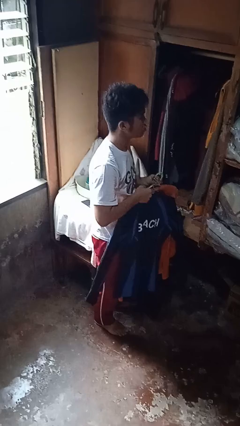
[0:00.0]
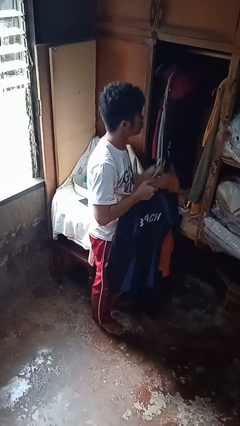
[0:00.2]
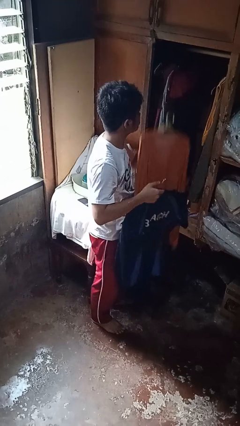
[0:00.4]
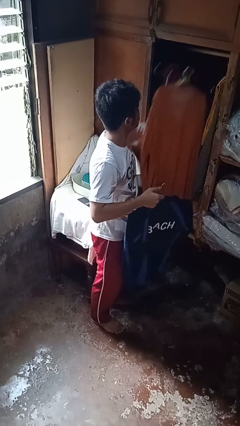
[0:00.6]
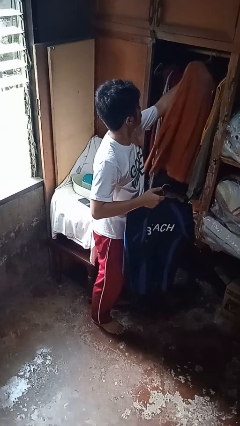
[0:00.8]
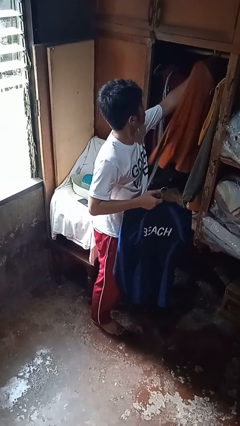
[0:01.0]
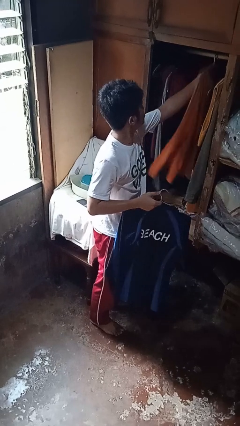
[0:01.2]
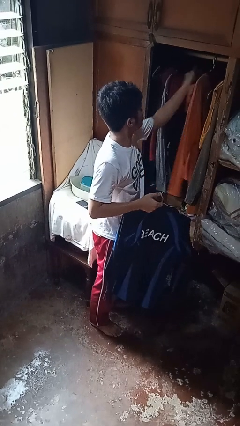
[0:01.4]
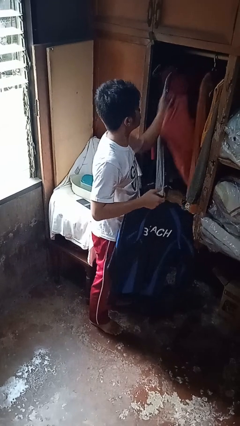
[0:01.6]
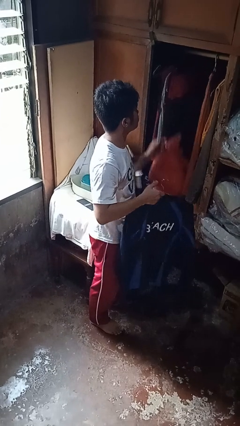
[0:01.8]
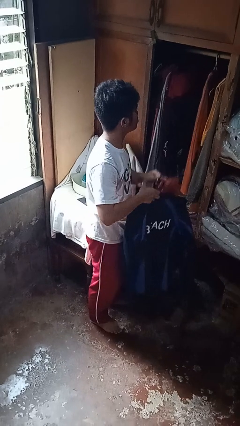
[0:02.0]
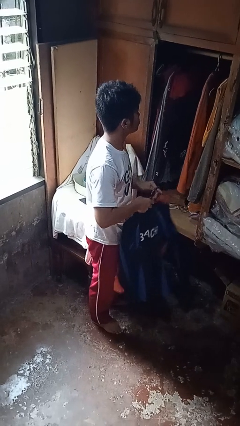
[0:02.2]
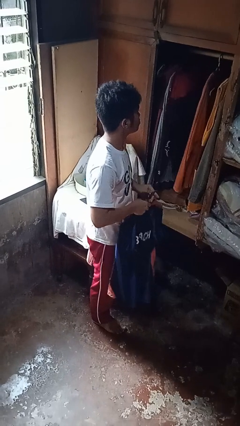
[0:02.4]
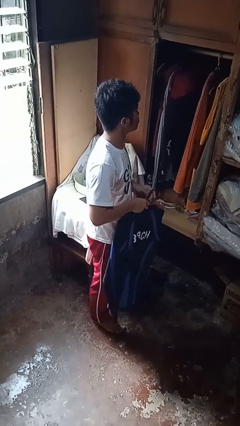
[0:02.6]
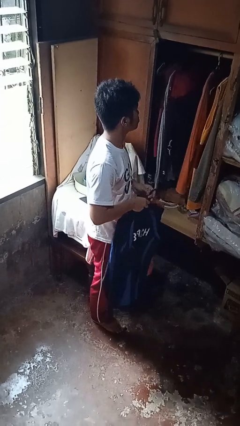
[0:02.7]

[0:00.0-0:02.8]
person puts clothes into closet

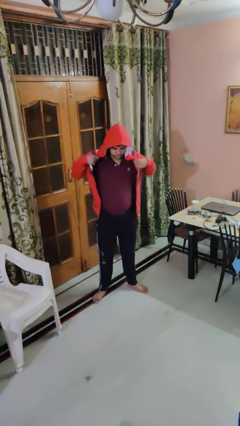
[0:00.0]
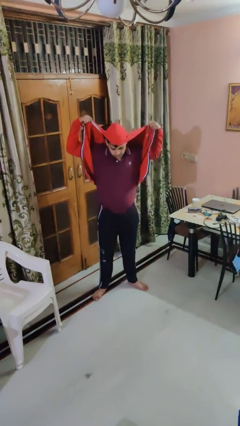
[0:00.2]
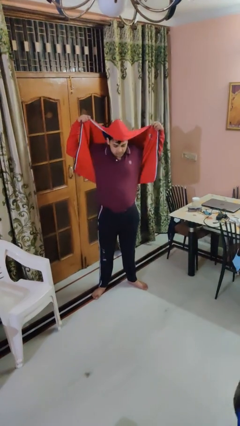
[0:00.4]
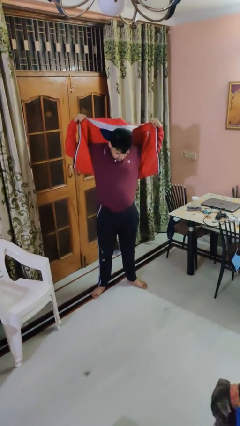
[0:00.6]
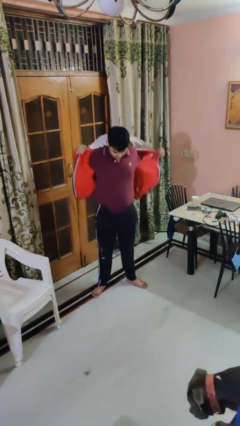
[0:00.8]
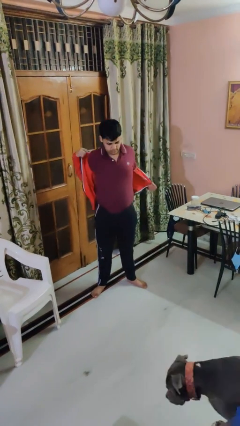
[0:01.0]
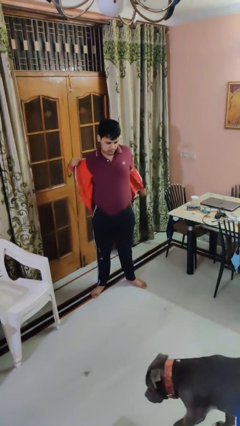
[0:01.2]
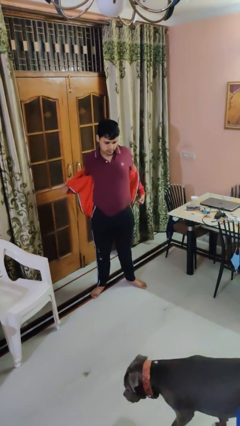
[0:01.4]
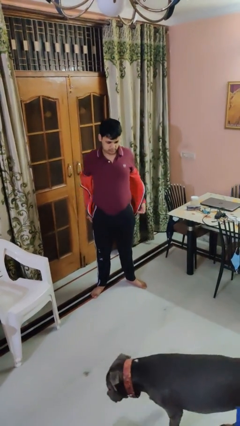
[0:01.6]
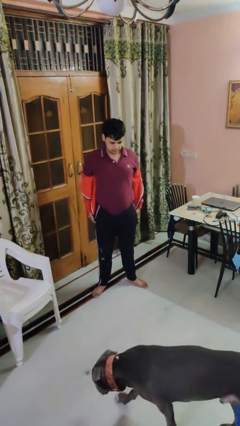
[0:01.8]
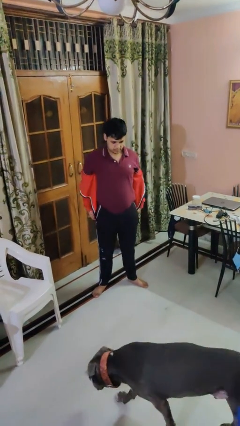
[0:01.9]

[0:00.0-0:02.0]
person takes off hoodie

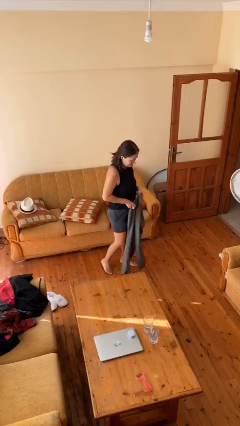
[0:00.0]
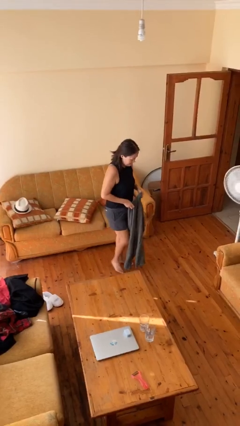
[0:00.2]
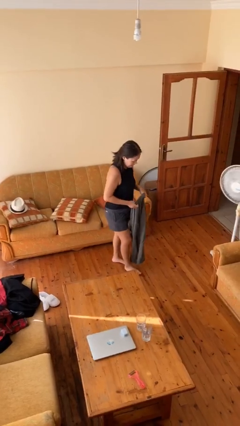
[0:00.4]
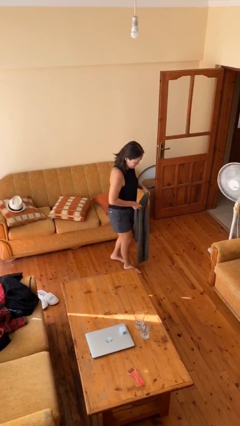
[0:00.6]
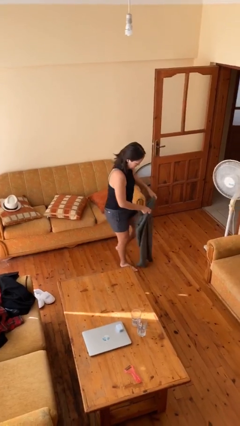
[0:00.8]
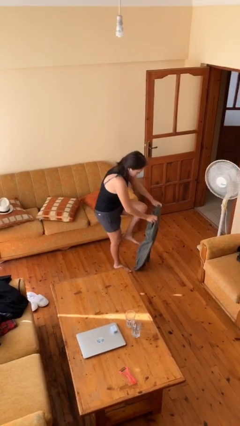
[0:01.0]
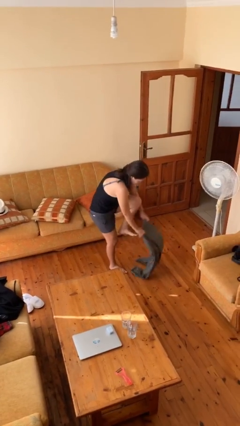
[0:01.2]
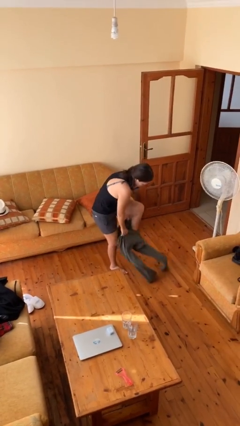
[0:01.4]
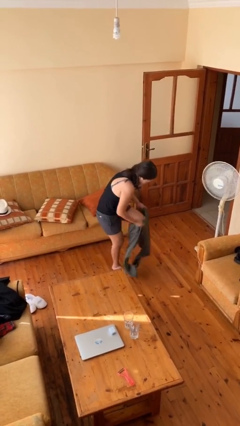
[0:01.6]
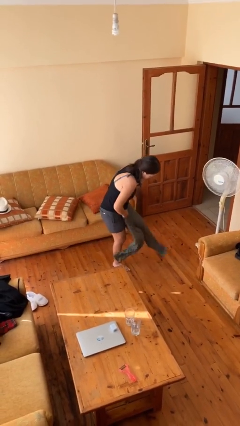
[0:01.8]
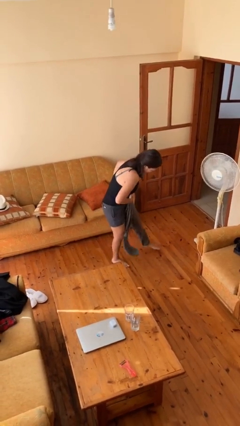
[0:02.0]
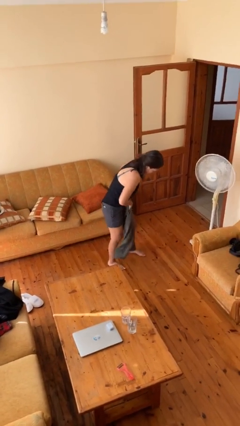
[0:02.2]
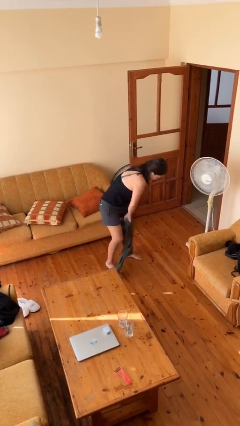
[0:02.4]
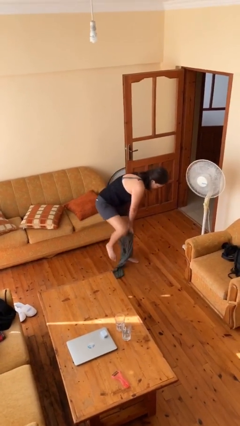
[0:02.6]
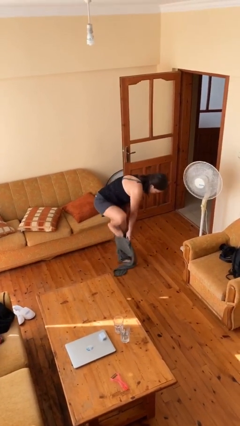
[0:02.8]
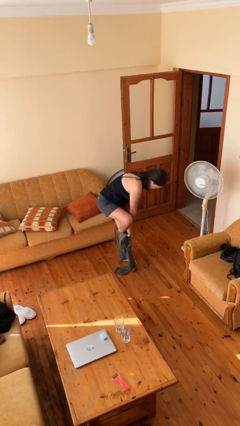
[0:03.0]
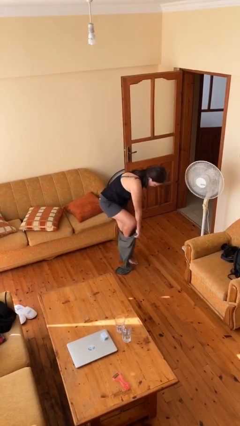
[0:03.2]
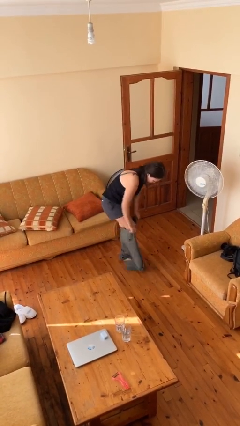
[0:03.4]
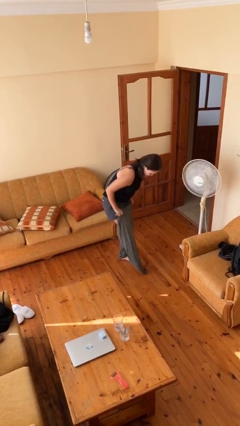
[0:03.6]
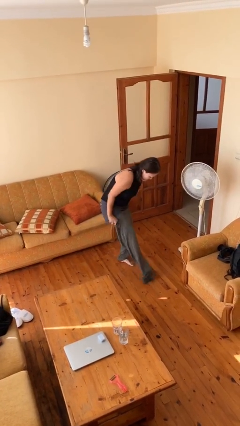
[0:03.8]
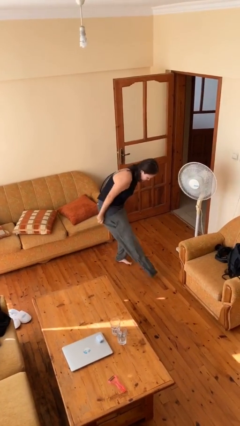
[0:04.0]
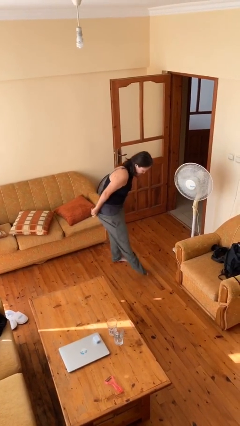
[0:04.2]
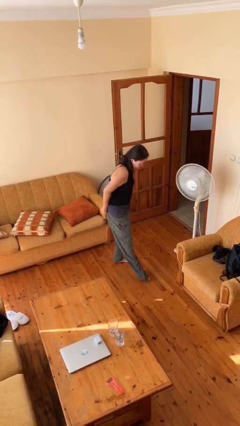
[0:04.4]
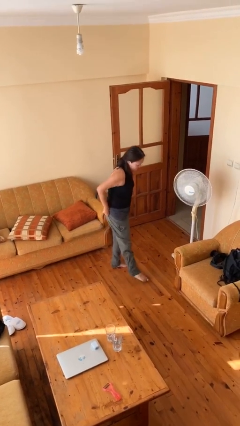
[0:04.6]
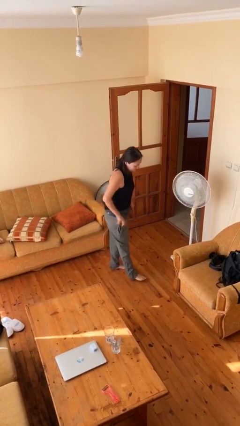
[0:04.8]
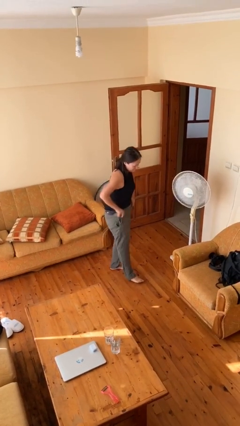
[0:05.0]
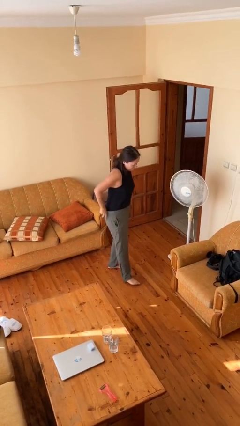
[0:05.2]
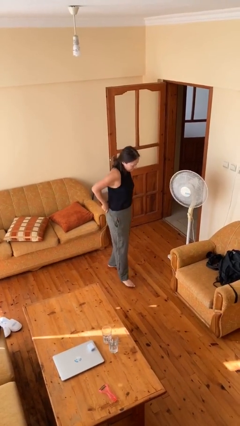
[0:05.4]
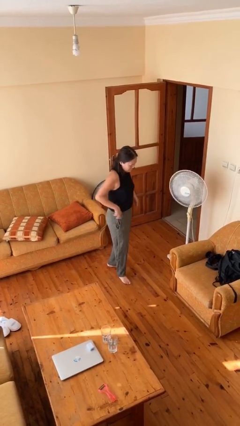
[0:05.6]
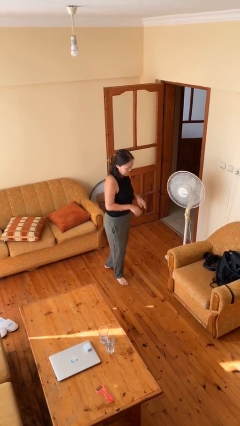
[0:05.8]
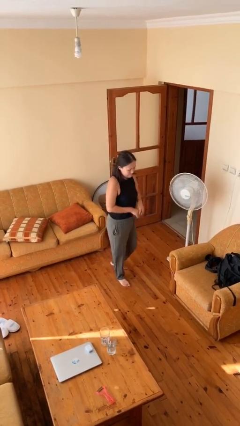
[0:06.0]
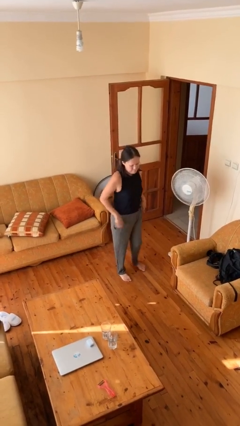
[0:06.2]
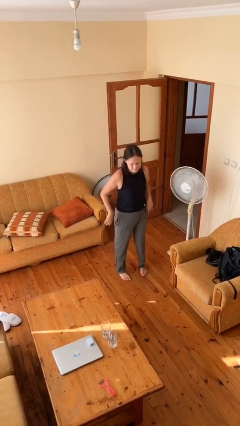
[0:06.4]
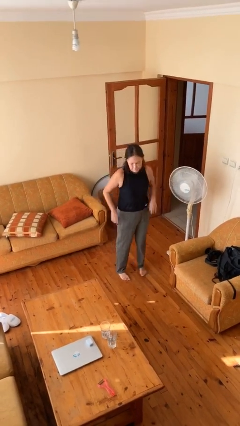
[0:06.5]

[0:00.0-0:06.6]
person puts on pants

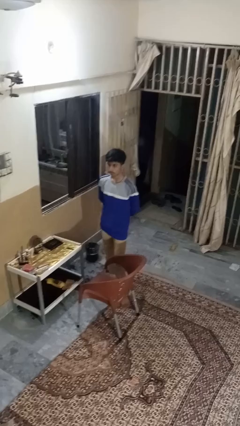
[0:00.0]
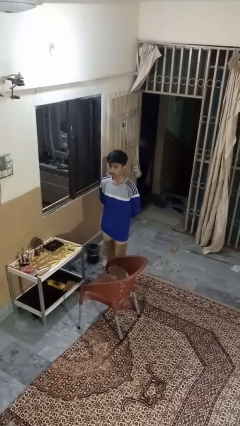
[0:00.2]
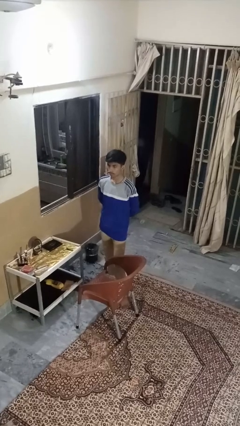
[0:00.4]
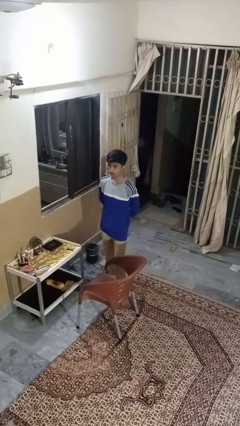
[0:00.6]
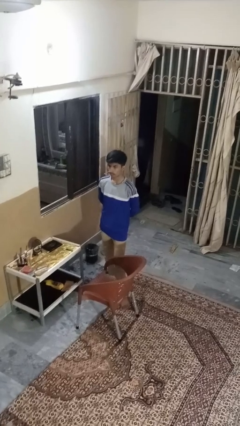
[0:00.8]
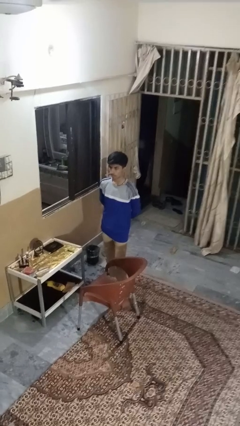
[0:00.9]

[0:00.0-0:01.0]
person shakes head

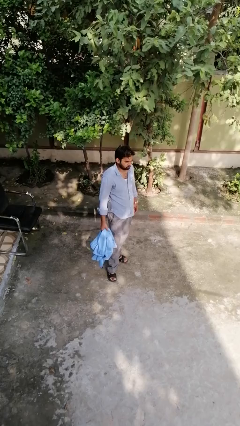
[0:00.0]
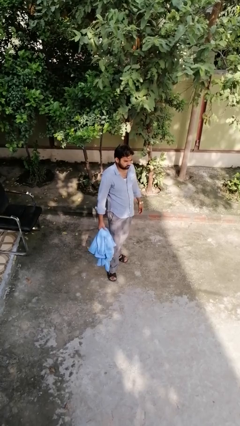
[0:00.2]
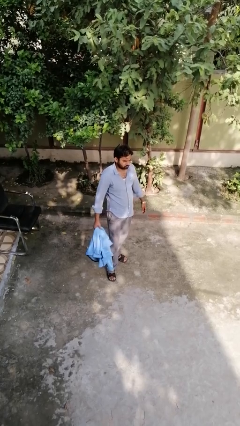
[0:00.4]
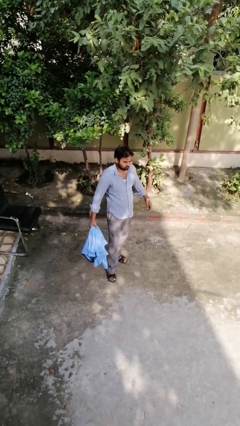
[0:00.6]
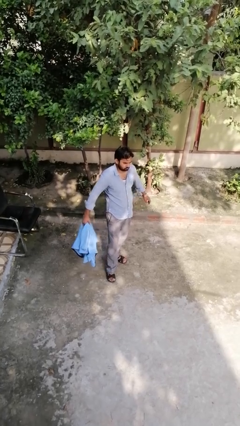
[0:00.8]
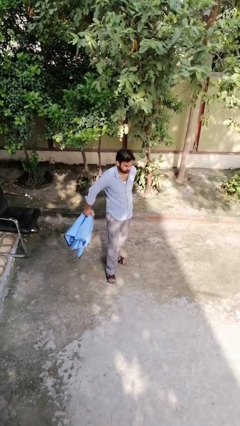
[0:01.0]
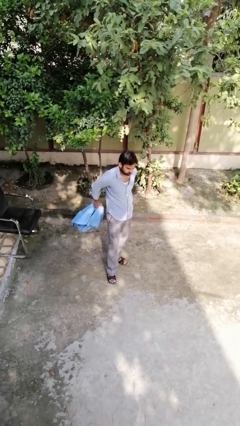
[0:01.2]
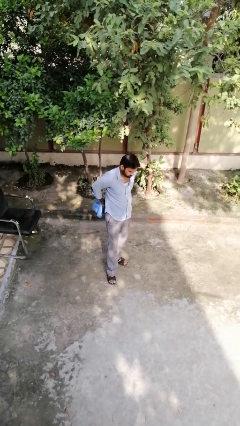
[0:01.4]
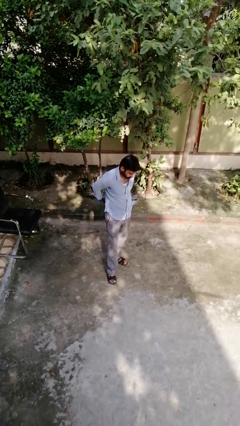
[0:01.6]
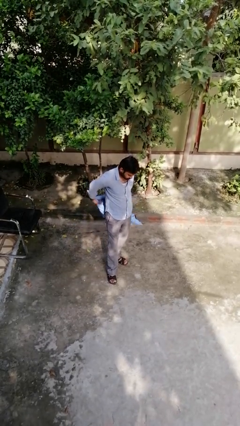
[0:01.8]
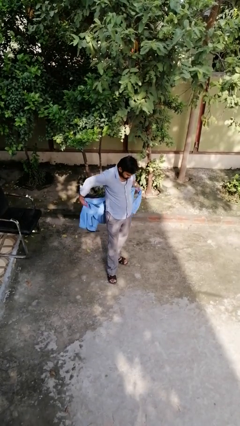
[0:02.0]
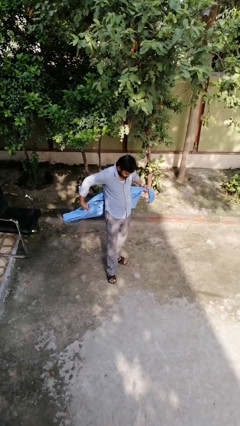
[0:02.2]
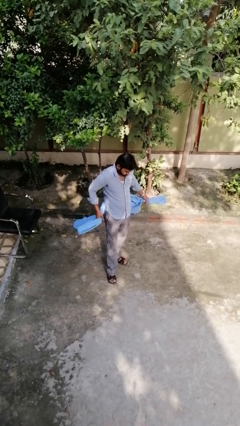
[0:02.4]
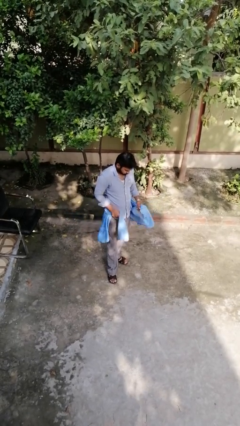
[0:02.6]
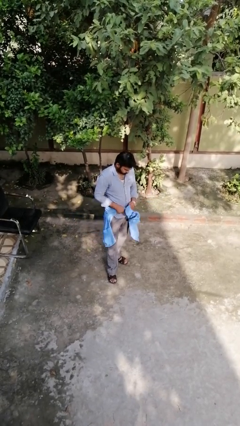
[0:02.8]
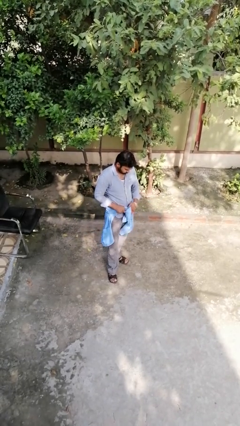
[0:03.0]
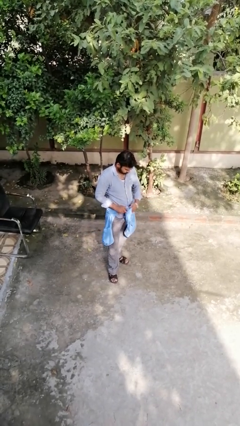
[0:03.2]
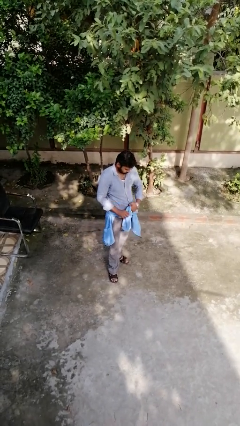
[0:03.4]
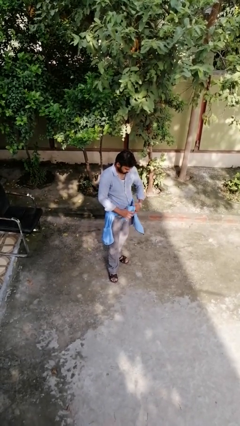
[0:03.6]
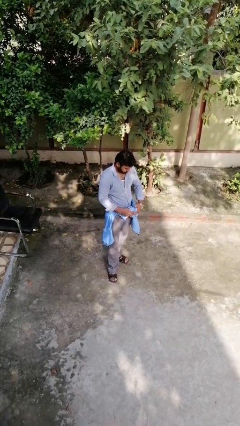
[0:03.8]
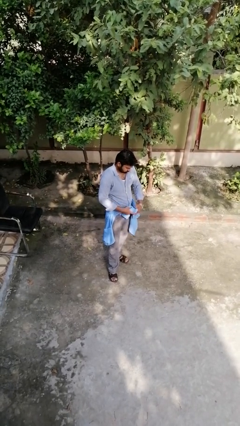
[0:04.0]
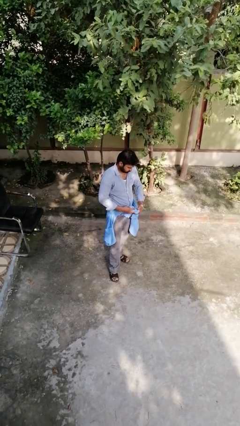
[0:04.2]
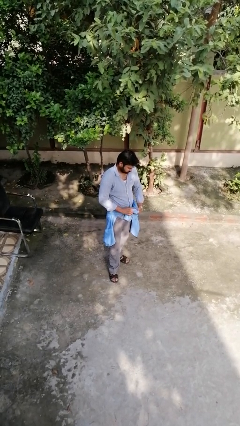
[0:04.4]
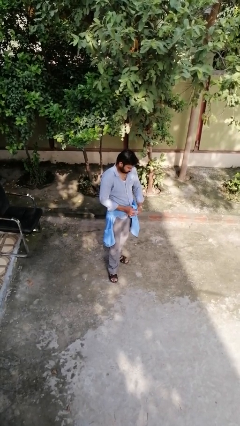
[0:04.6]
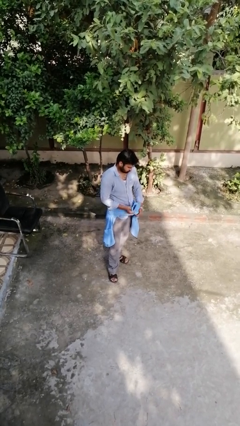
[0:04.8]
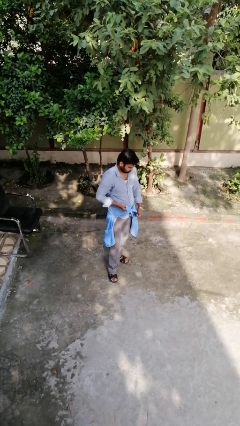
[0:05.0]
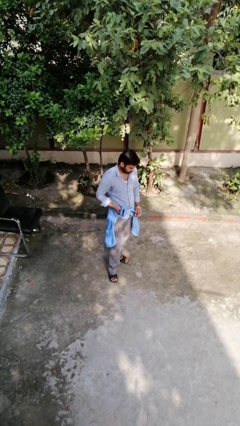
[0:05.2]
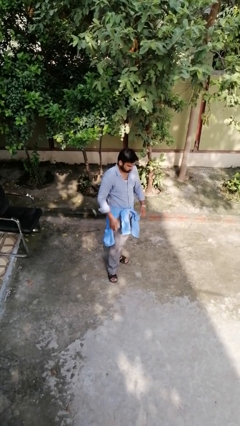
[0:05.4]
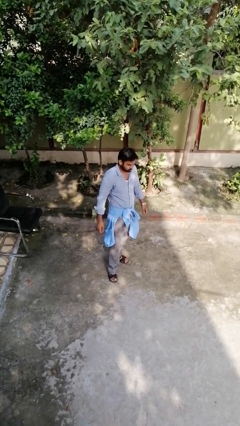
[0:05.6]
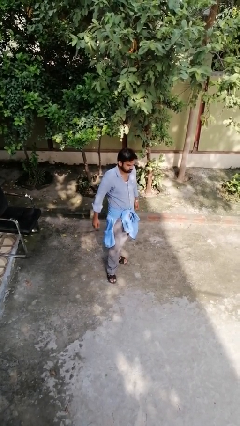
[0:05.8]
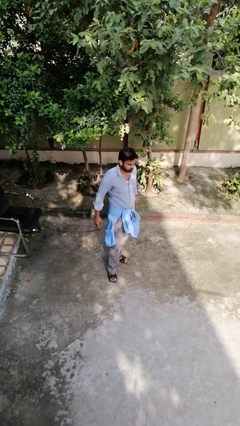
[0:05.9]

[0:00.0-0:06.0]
person ties jacket around waist
